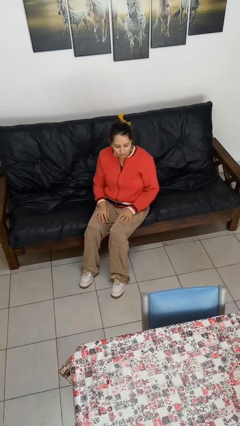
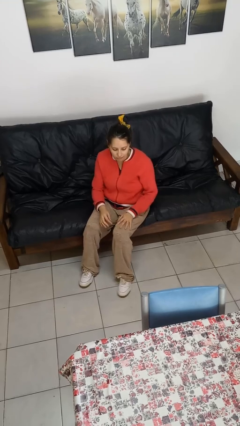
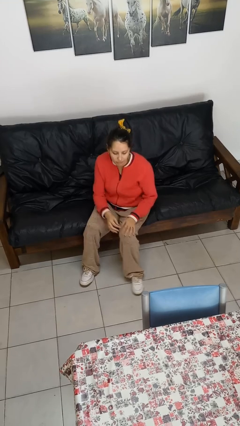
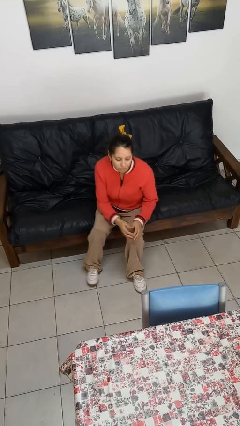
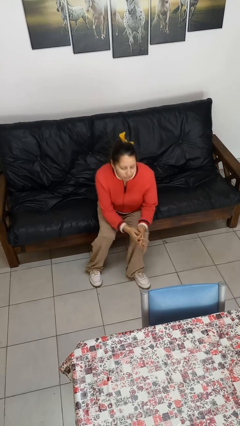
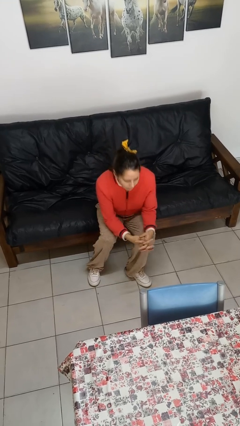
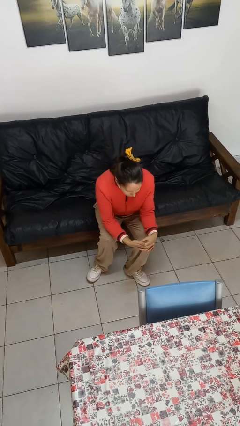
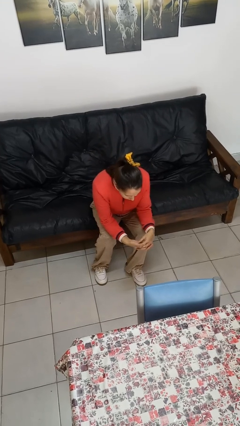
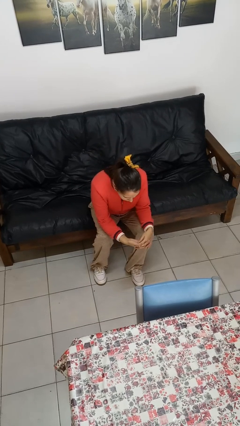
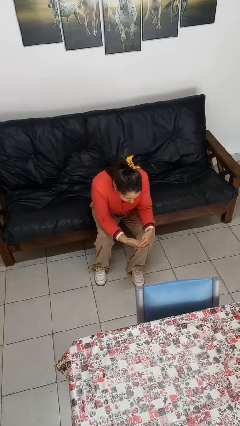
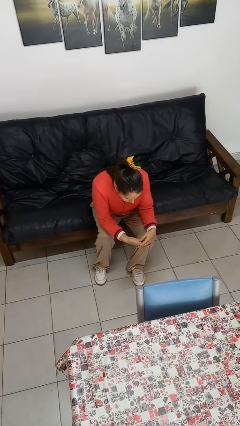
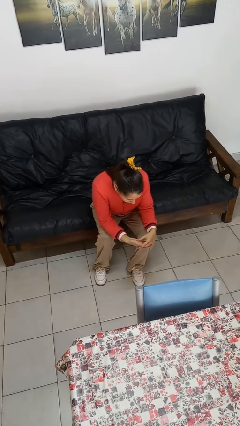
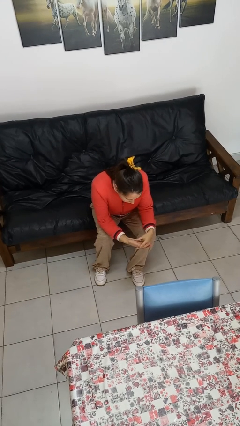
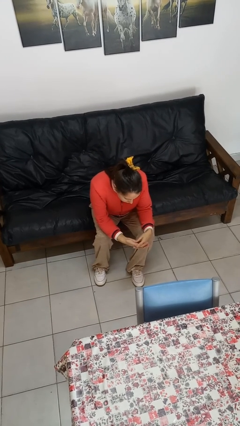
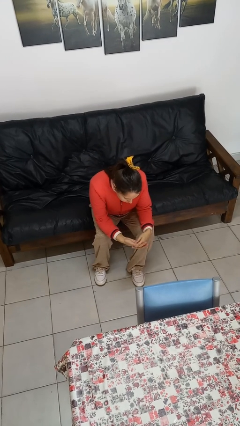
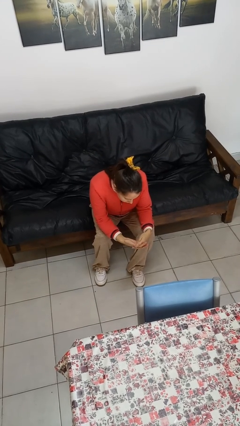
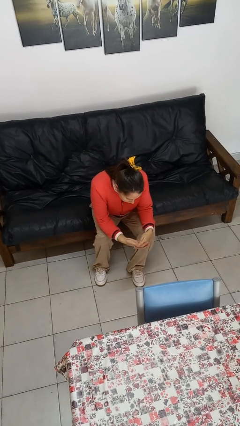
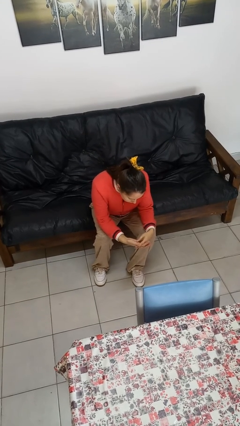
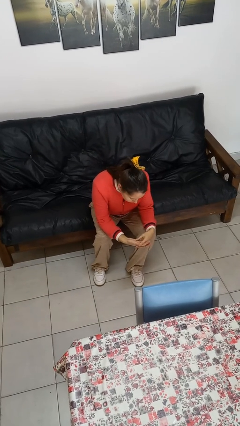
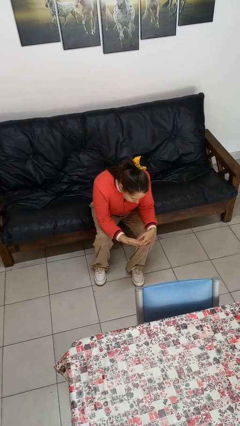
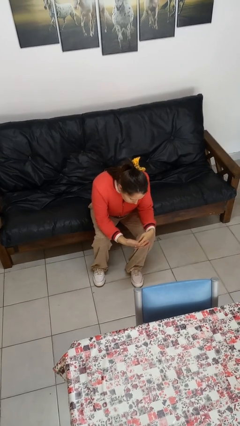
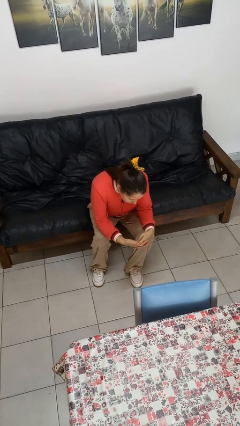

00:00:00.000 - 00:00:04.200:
person looks at hands in lap

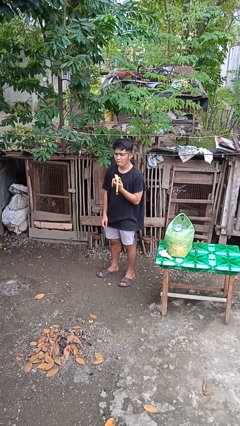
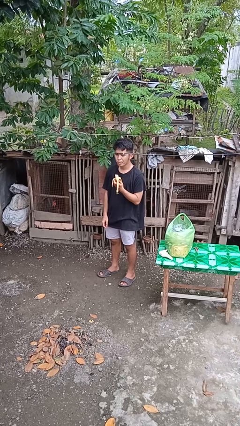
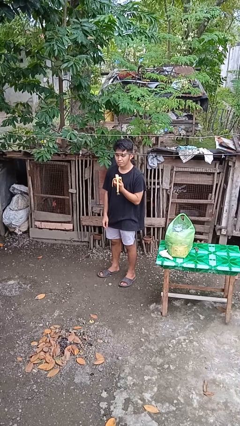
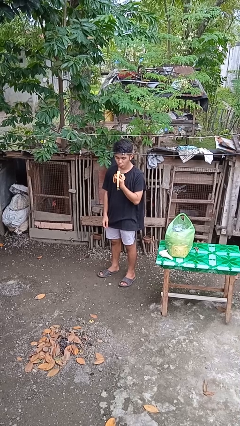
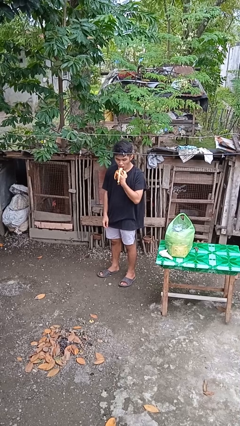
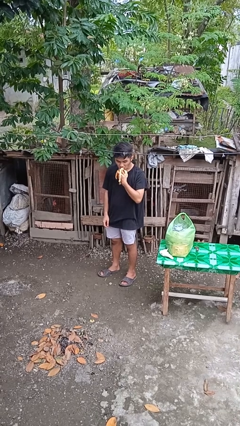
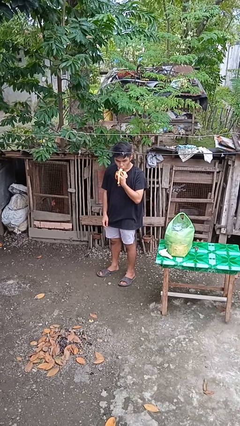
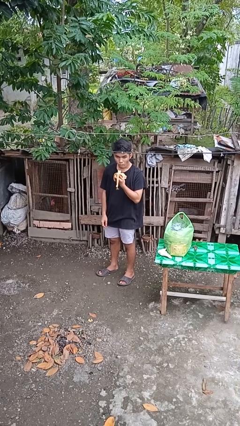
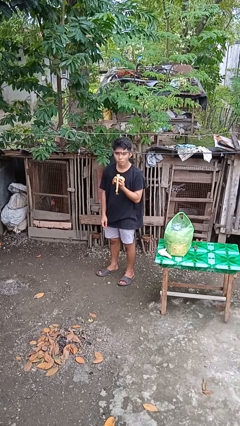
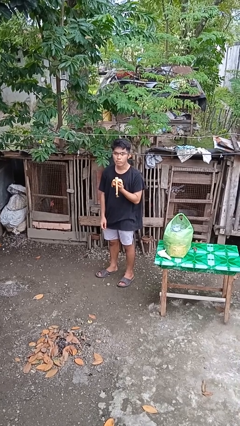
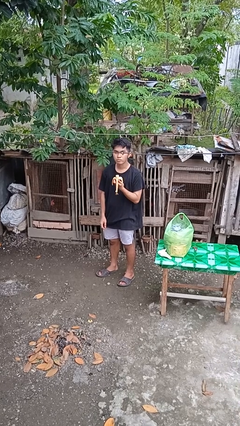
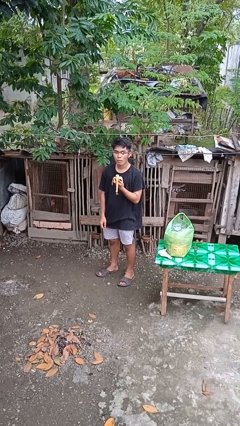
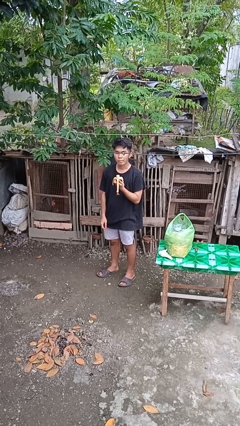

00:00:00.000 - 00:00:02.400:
person eats banana

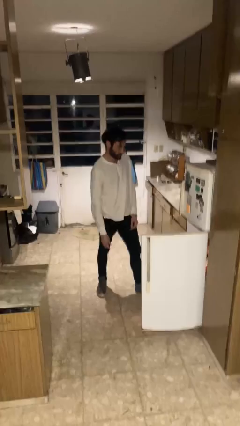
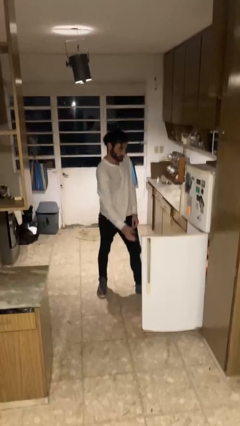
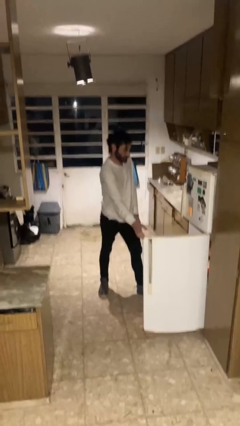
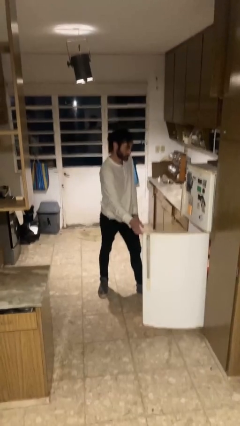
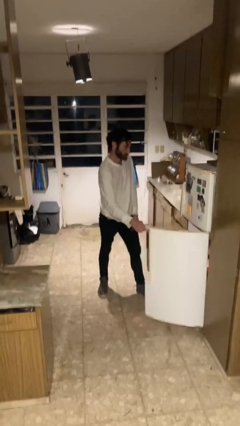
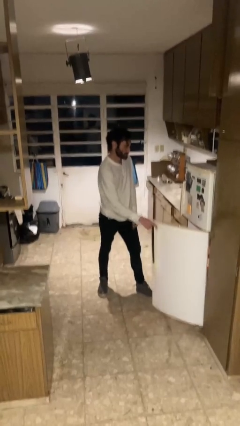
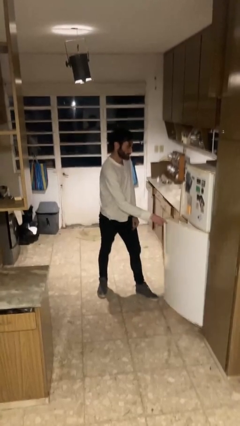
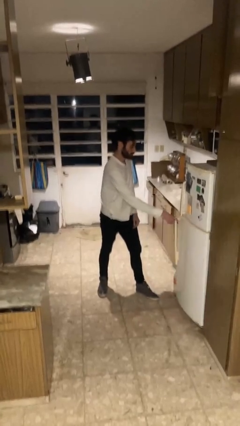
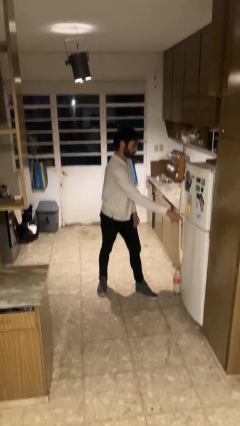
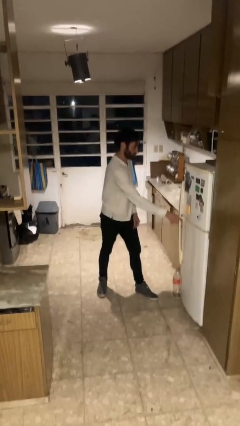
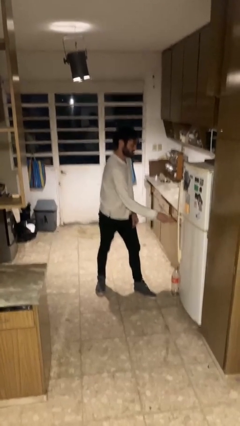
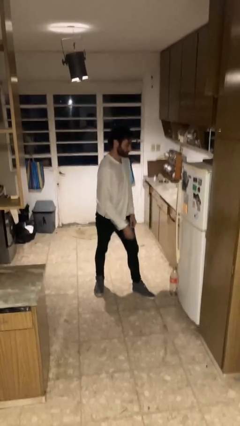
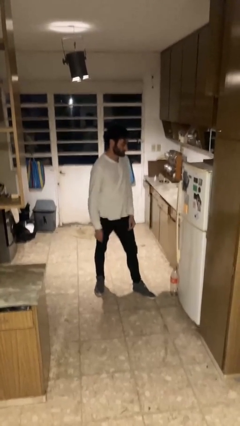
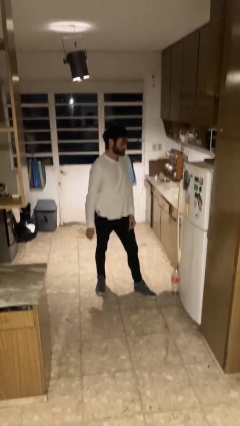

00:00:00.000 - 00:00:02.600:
person closes refrigerator

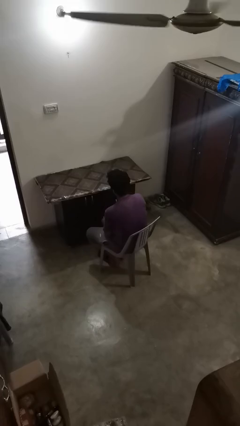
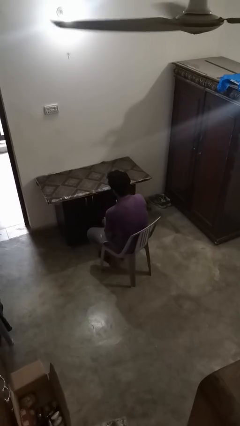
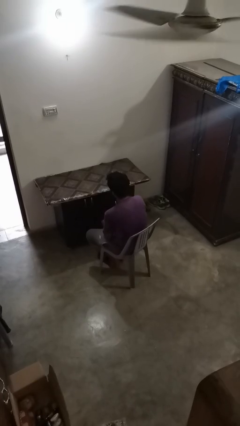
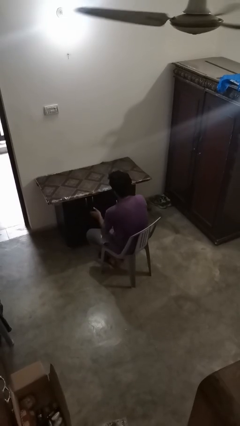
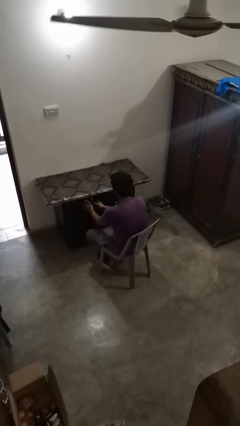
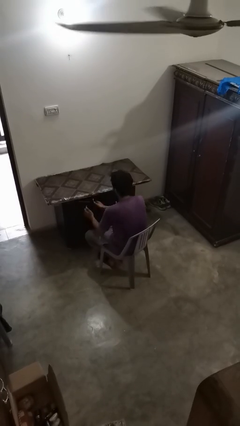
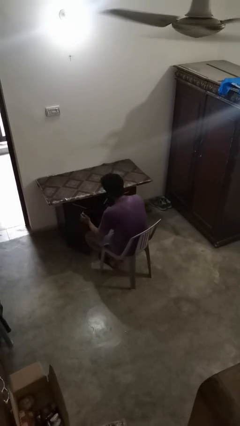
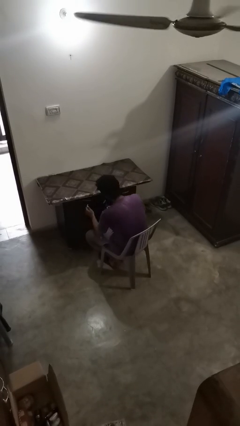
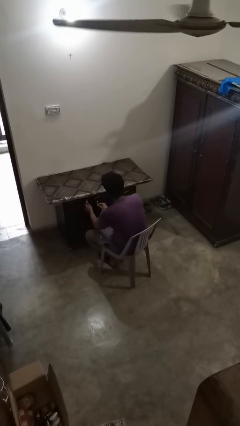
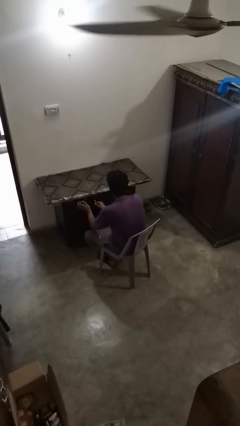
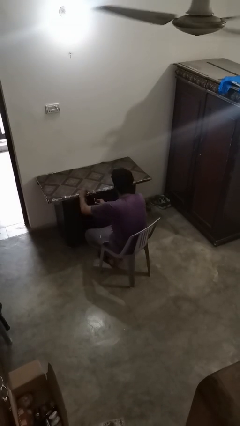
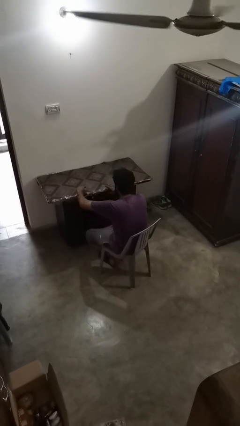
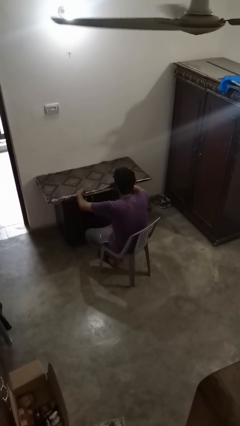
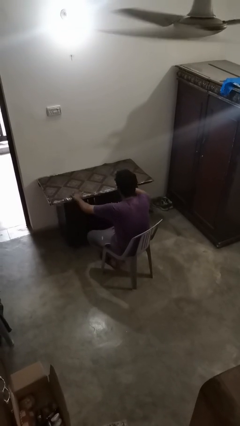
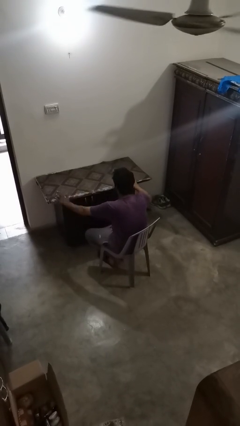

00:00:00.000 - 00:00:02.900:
person sets upright furniture

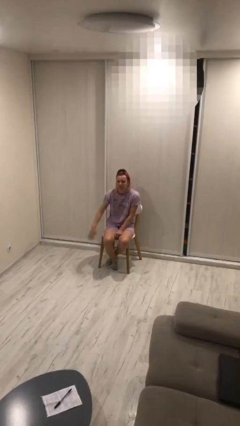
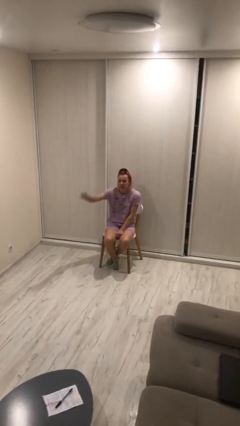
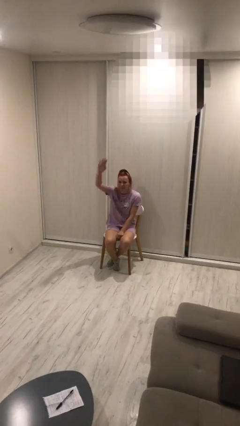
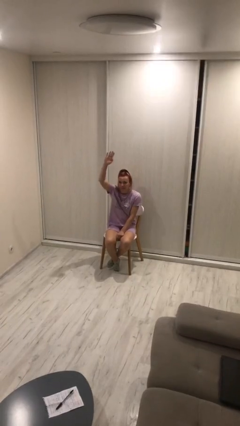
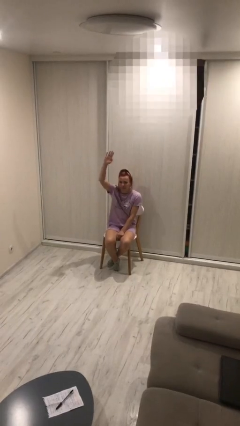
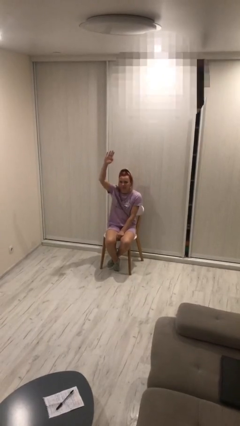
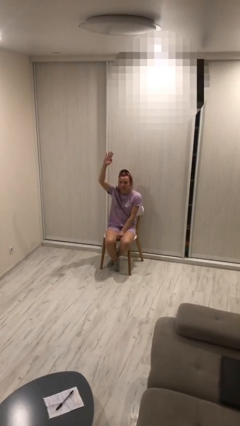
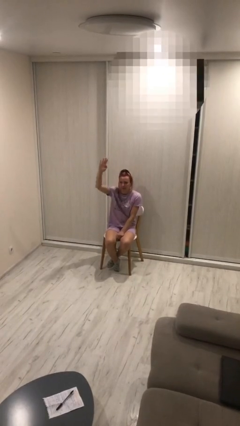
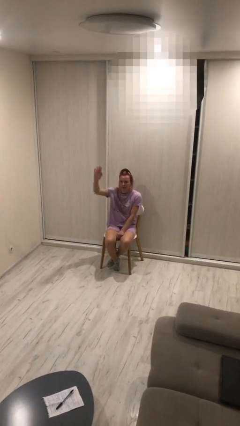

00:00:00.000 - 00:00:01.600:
person gestures raise hand

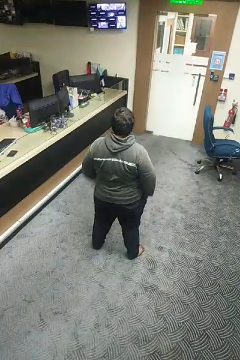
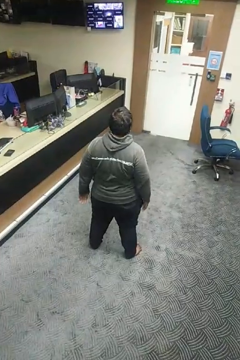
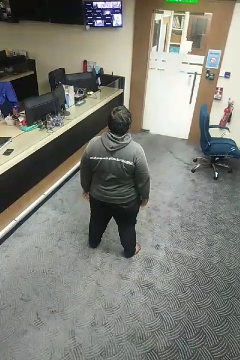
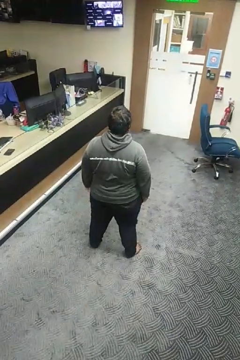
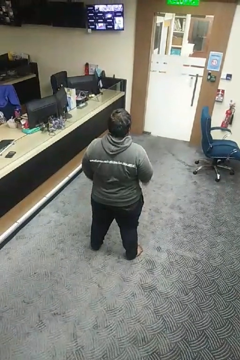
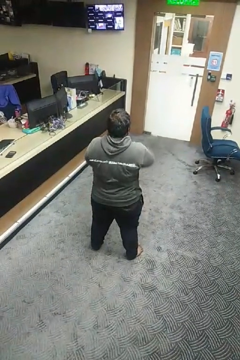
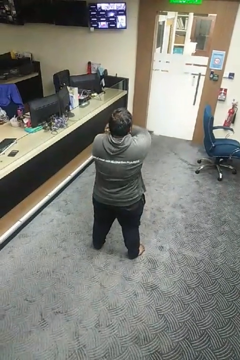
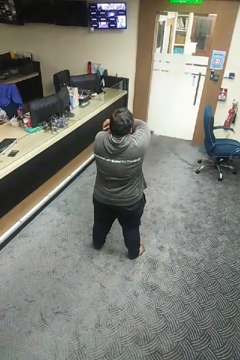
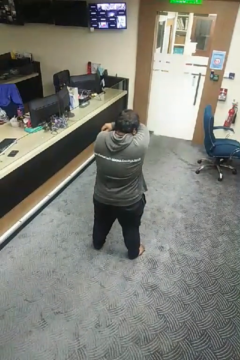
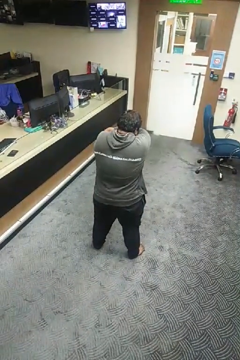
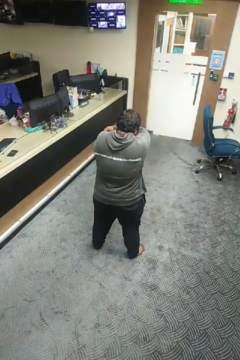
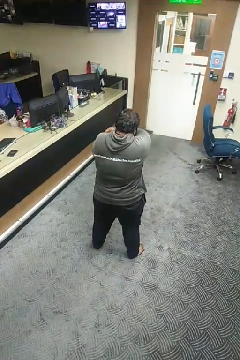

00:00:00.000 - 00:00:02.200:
person sneezes into arm

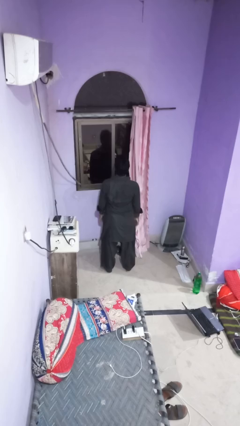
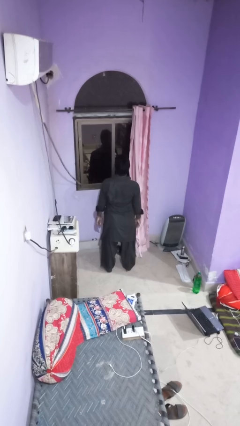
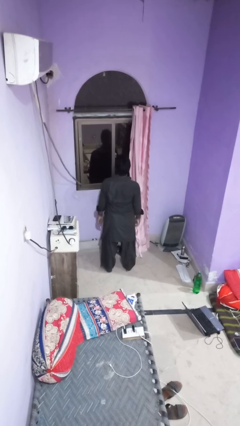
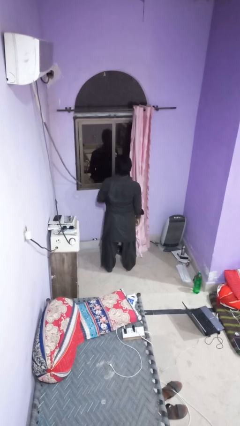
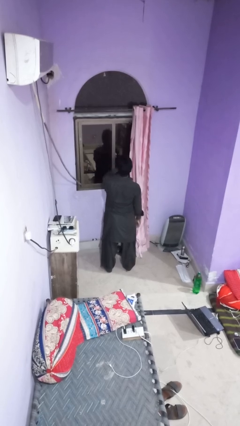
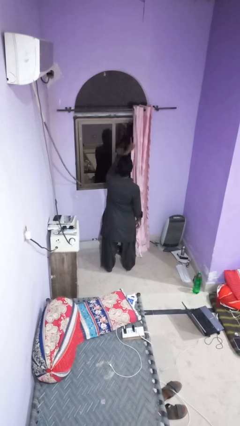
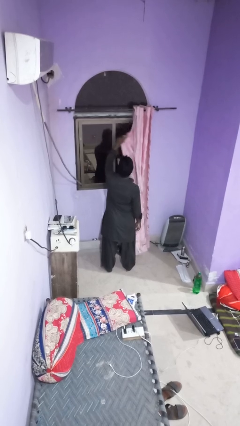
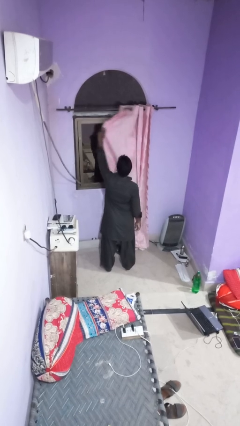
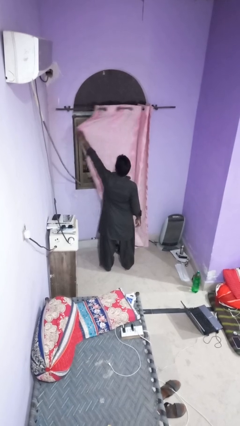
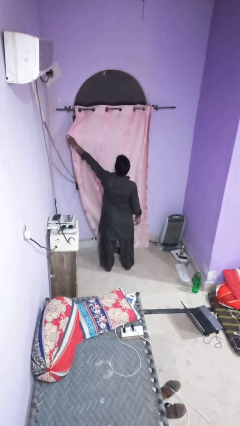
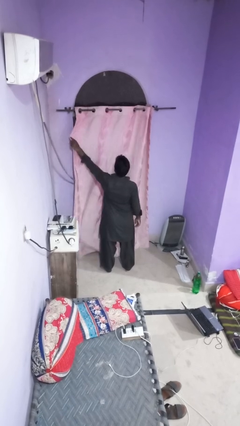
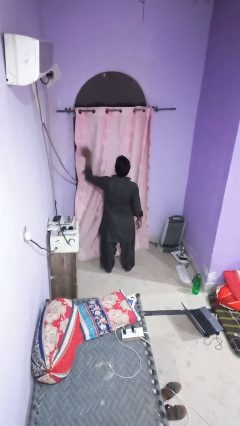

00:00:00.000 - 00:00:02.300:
person closes curtains
